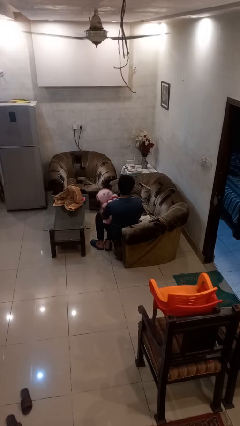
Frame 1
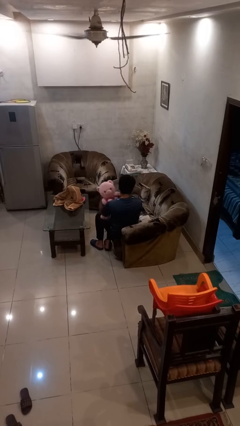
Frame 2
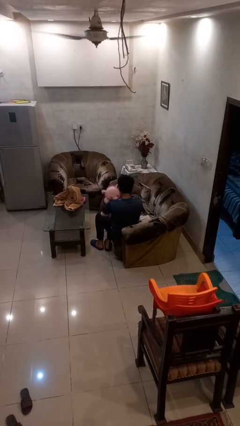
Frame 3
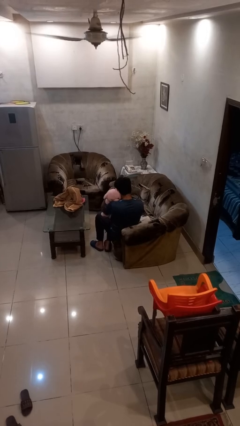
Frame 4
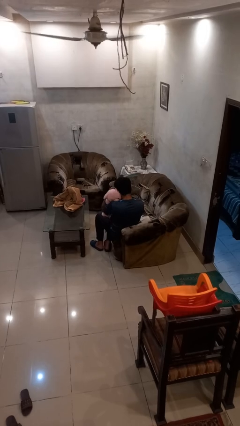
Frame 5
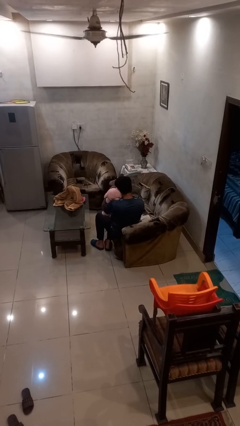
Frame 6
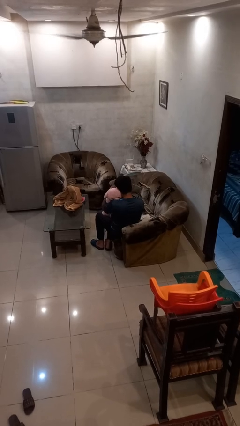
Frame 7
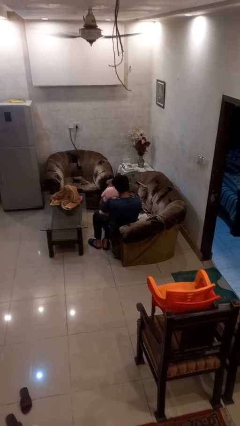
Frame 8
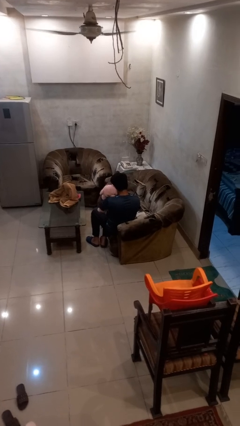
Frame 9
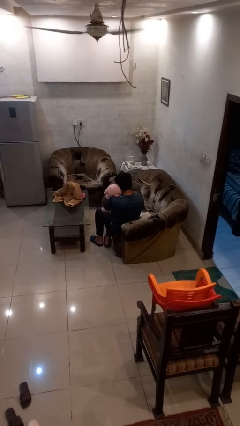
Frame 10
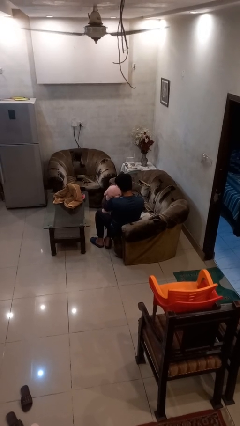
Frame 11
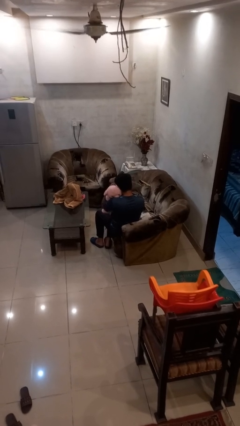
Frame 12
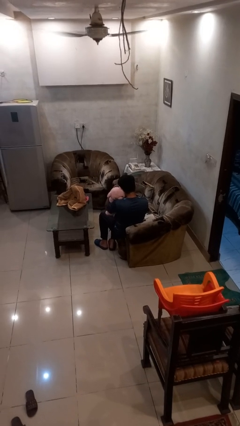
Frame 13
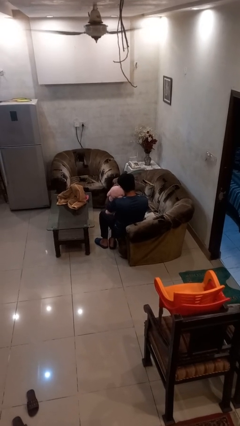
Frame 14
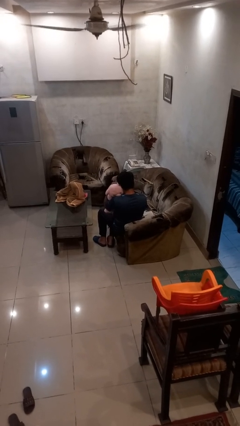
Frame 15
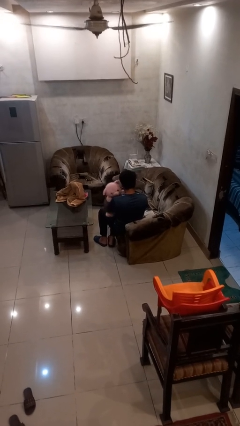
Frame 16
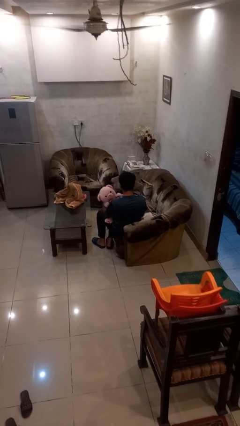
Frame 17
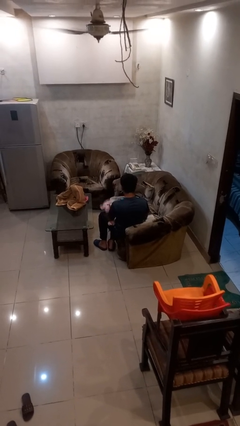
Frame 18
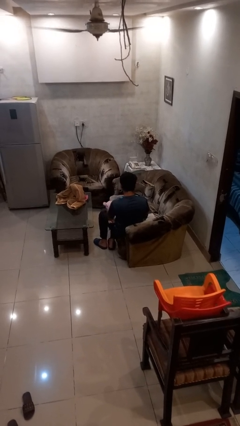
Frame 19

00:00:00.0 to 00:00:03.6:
person hugs stuffed animal

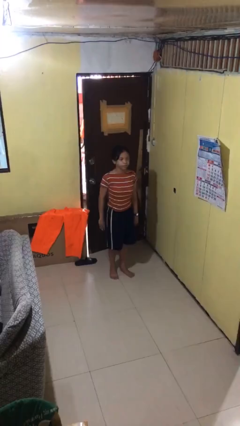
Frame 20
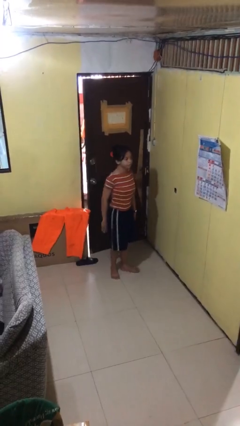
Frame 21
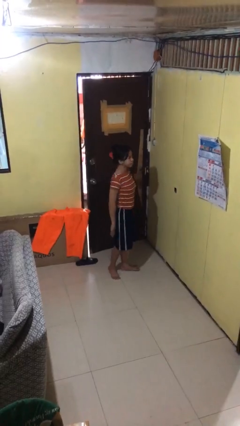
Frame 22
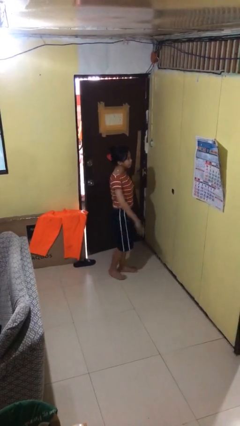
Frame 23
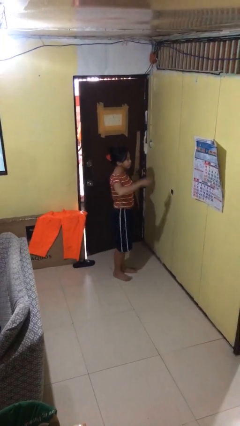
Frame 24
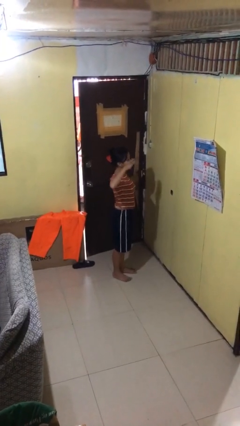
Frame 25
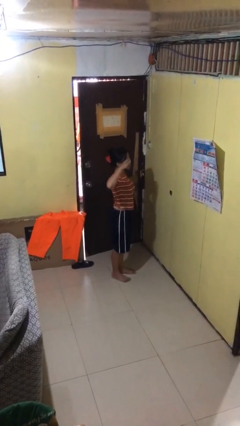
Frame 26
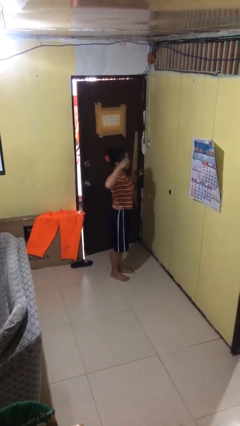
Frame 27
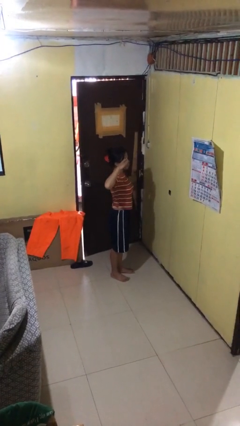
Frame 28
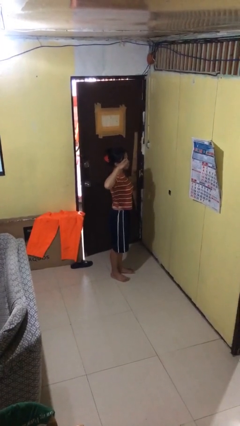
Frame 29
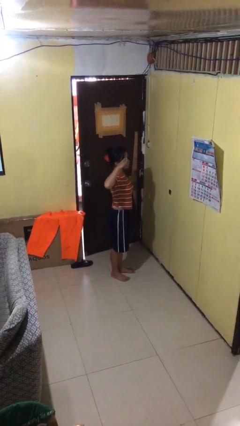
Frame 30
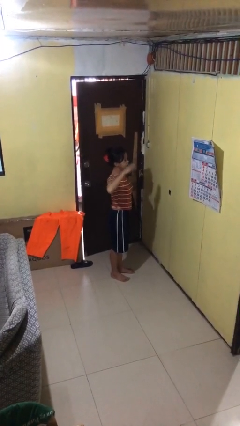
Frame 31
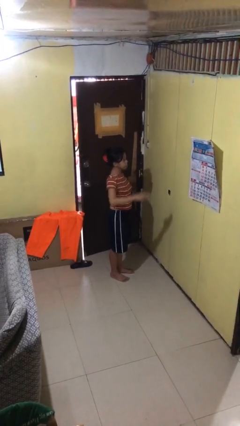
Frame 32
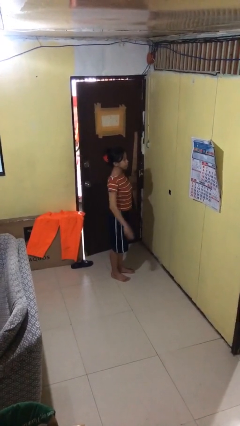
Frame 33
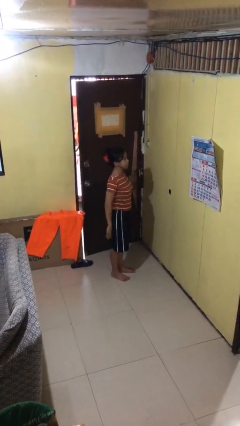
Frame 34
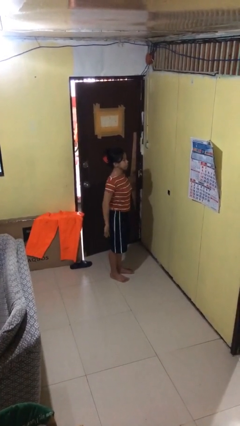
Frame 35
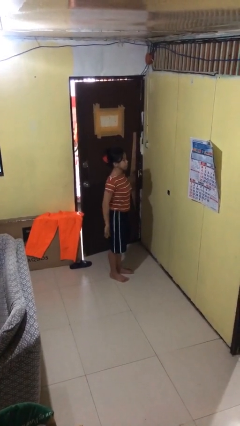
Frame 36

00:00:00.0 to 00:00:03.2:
person salutes

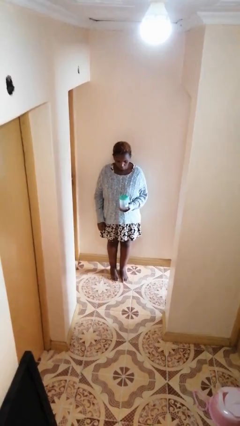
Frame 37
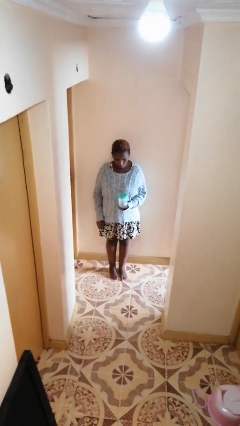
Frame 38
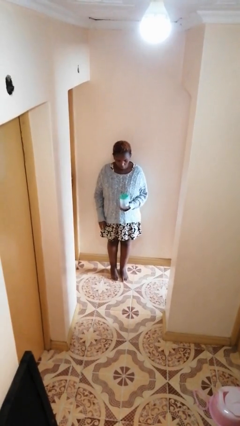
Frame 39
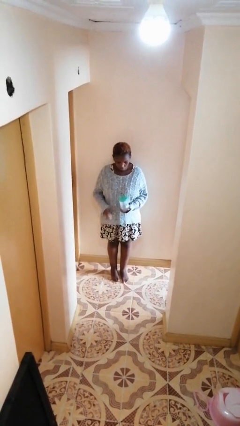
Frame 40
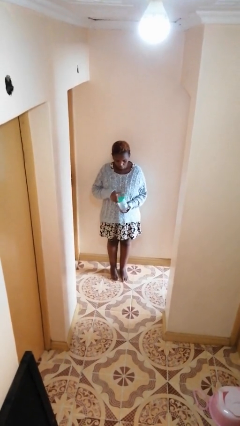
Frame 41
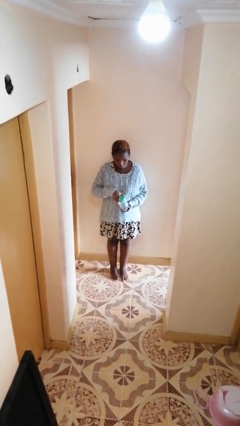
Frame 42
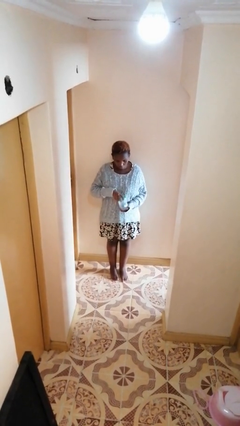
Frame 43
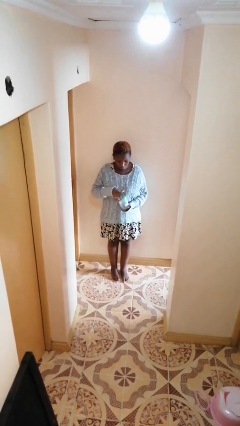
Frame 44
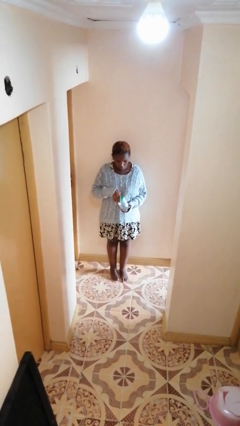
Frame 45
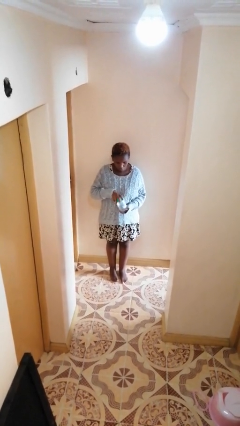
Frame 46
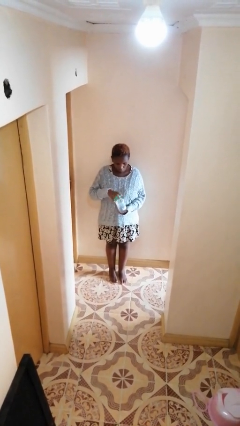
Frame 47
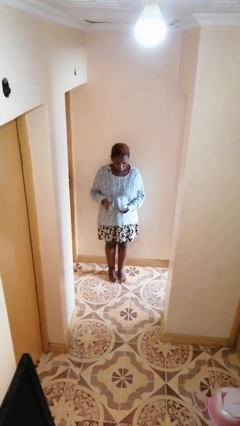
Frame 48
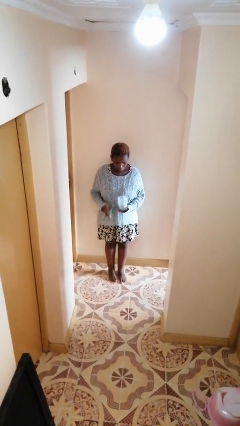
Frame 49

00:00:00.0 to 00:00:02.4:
person opens jar

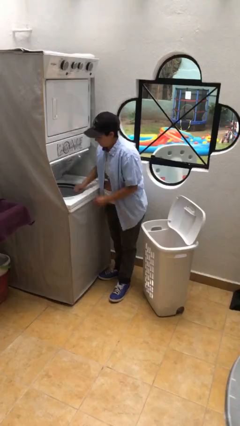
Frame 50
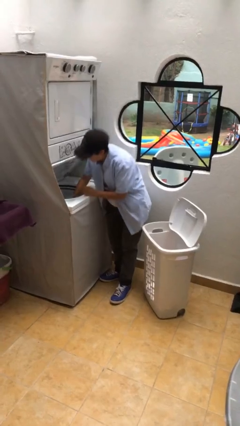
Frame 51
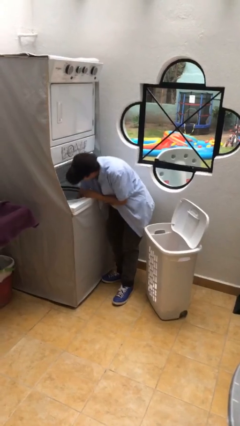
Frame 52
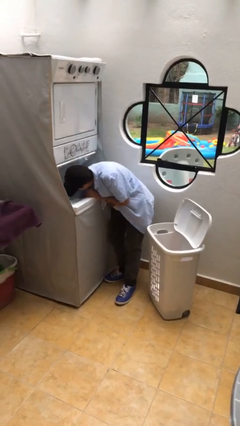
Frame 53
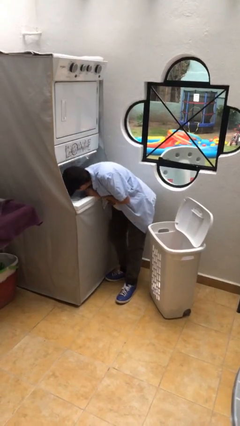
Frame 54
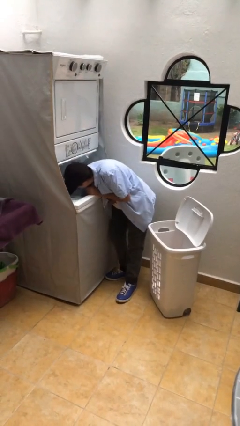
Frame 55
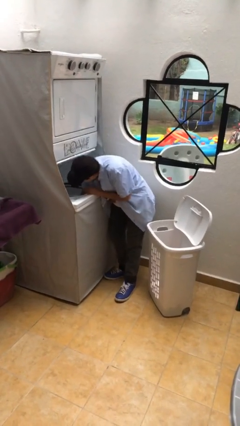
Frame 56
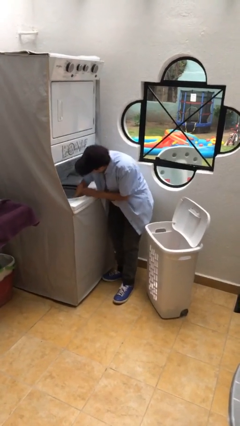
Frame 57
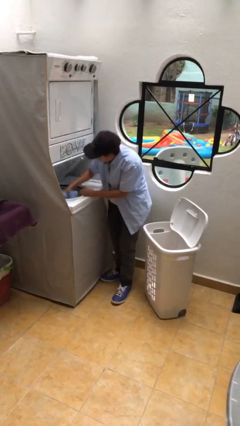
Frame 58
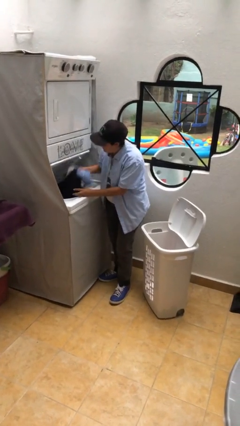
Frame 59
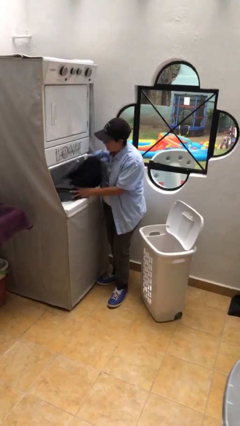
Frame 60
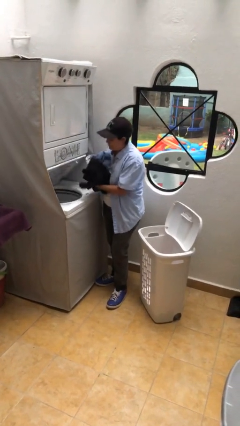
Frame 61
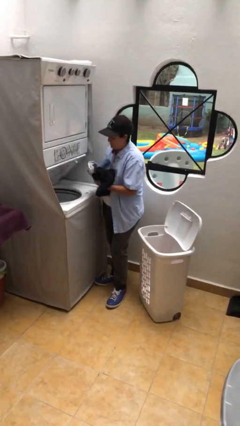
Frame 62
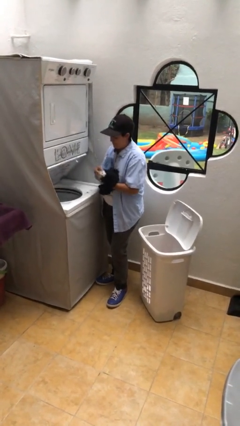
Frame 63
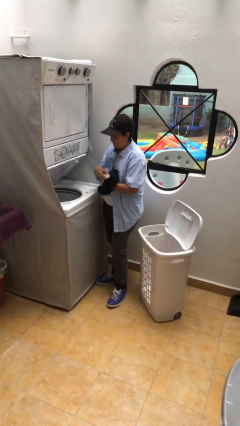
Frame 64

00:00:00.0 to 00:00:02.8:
person unloads clotheswasher

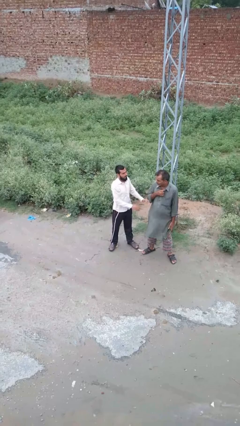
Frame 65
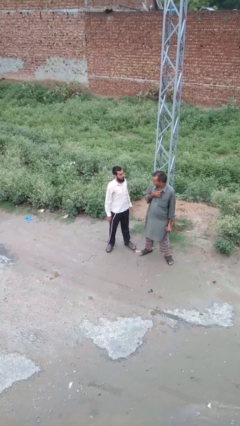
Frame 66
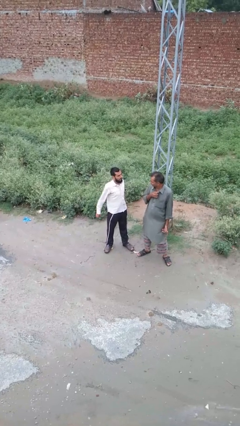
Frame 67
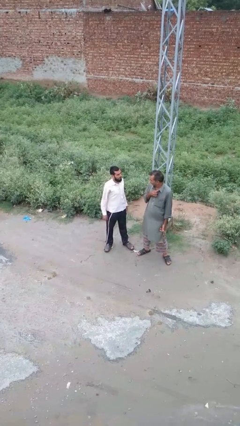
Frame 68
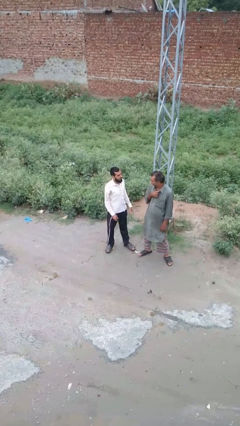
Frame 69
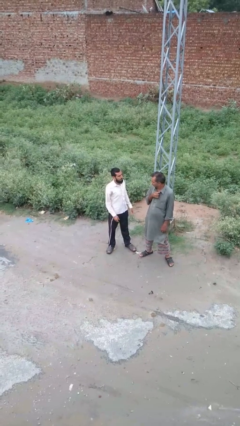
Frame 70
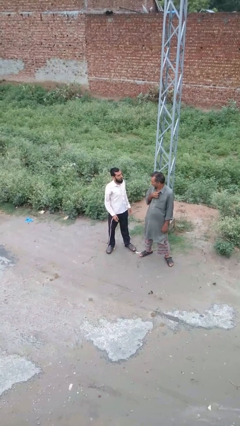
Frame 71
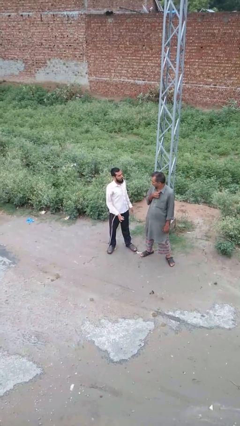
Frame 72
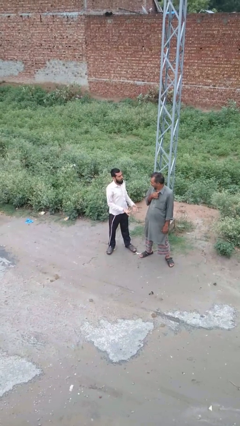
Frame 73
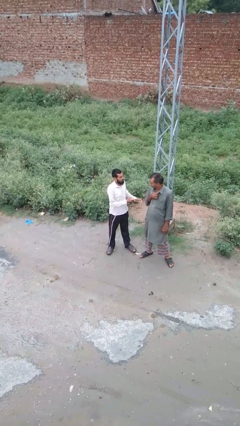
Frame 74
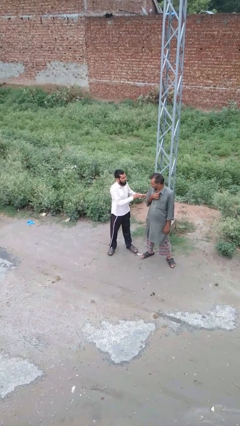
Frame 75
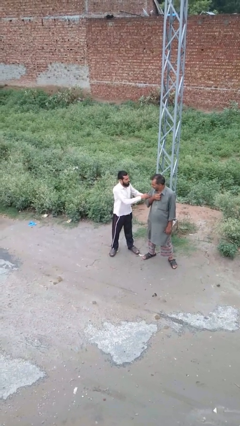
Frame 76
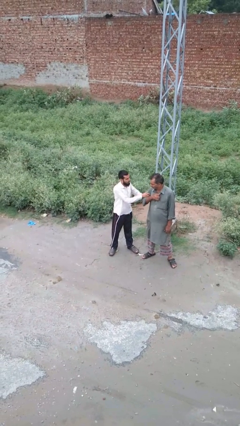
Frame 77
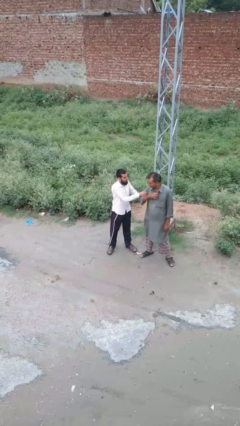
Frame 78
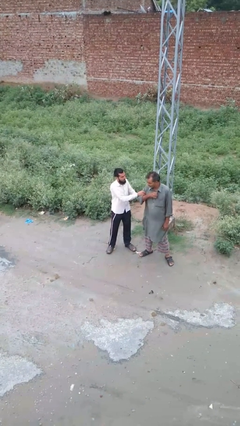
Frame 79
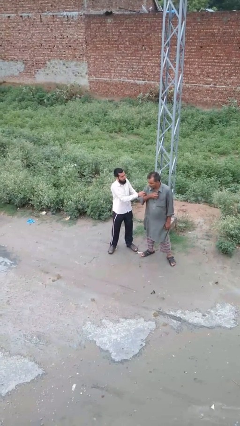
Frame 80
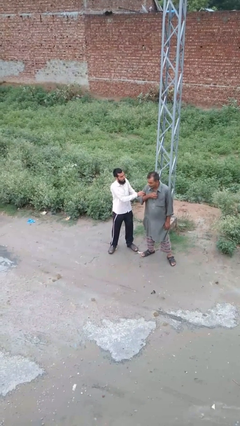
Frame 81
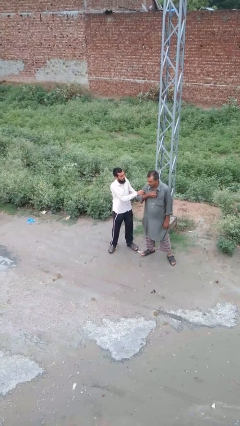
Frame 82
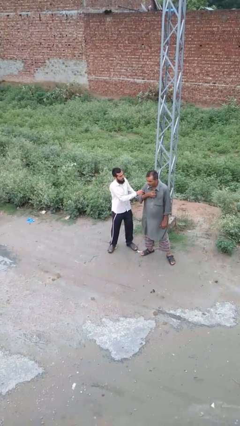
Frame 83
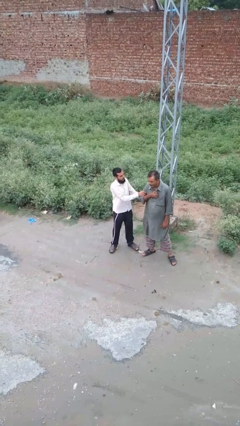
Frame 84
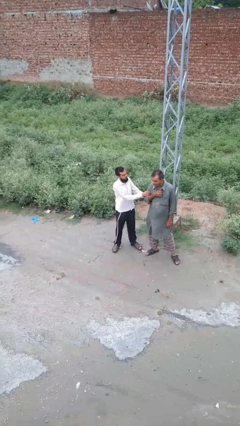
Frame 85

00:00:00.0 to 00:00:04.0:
person grabs person by bicep

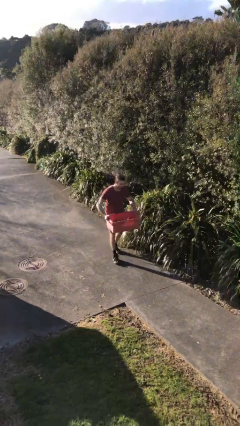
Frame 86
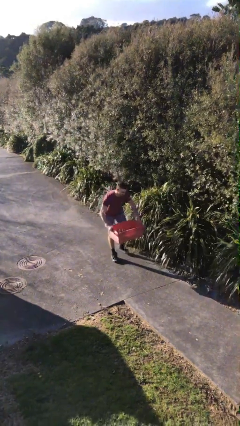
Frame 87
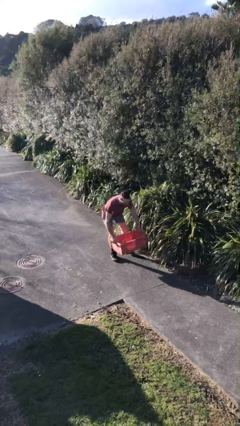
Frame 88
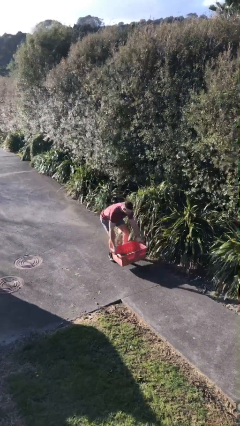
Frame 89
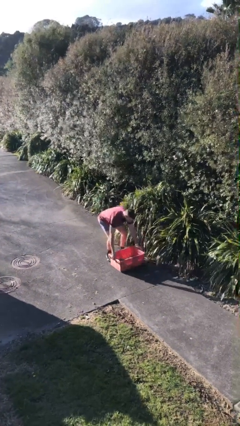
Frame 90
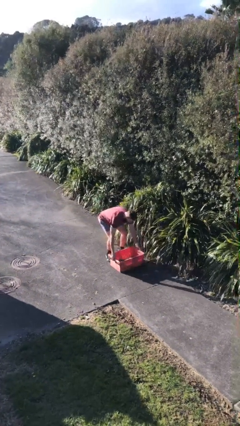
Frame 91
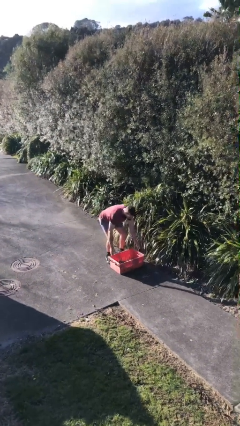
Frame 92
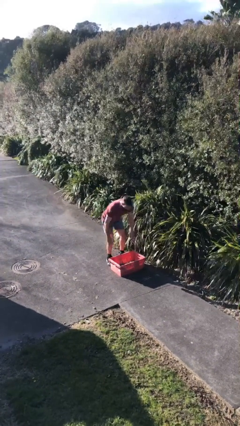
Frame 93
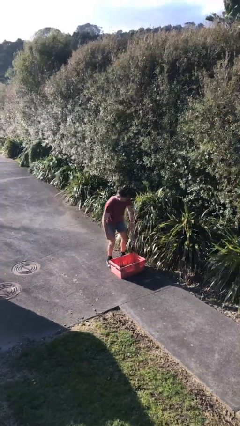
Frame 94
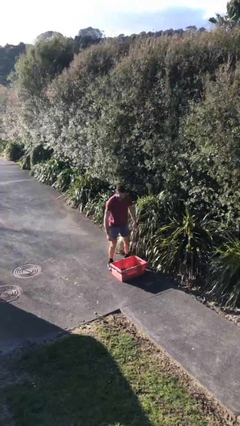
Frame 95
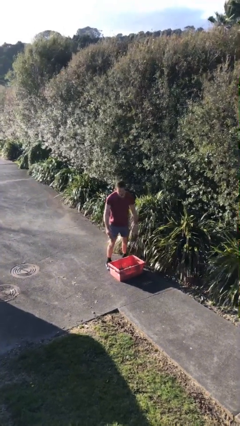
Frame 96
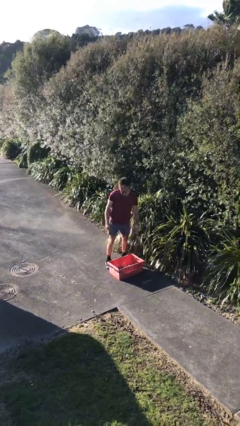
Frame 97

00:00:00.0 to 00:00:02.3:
person puts down object on floor
